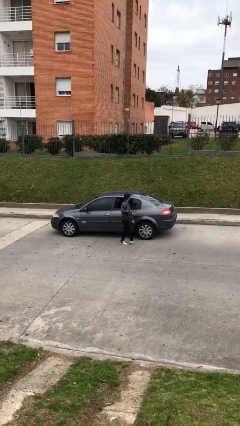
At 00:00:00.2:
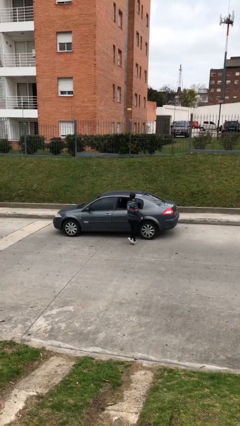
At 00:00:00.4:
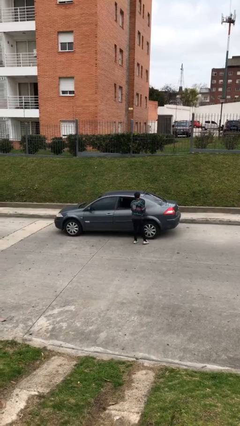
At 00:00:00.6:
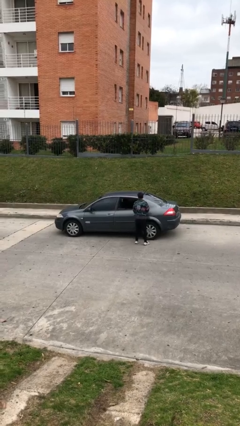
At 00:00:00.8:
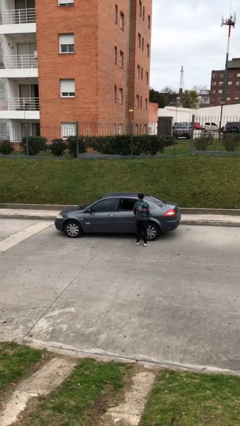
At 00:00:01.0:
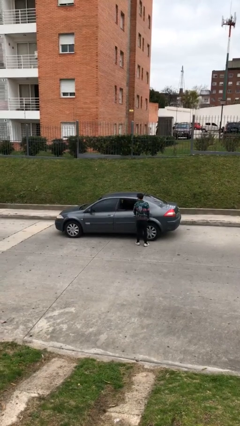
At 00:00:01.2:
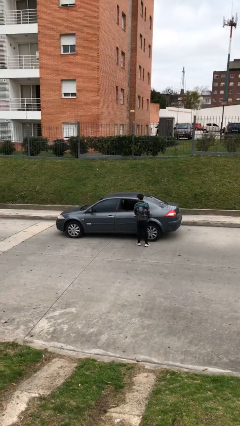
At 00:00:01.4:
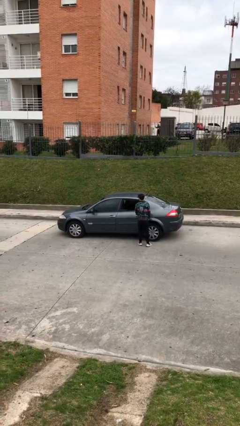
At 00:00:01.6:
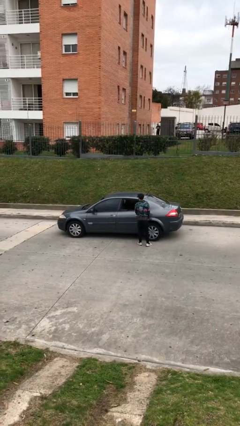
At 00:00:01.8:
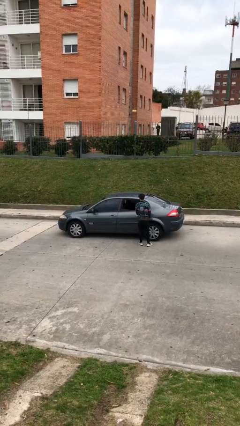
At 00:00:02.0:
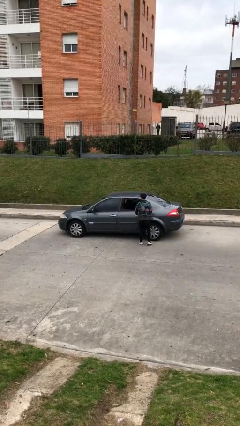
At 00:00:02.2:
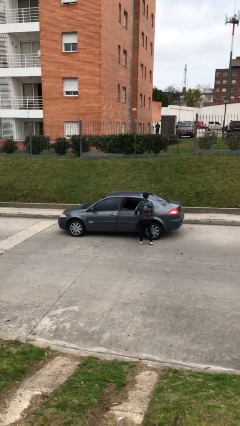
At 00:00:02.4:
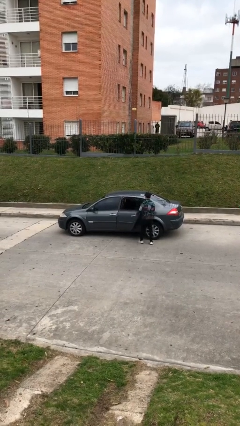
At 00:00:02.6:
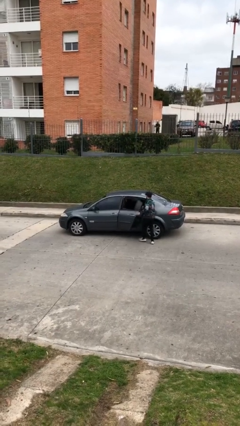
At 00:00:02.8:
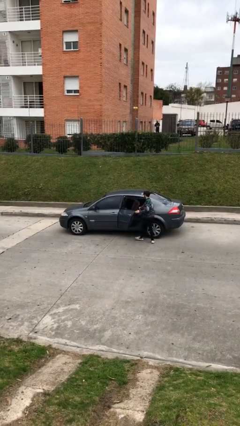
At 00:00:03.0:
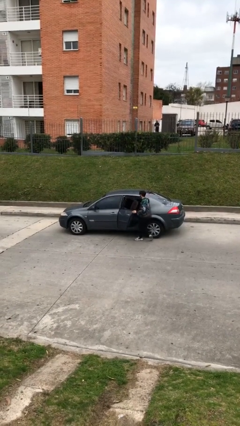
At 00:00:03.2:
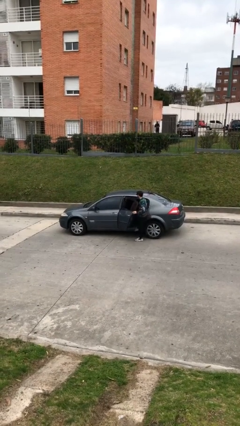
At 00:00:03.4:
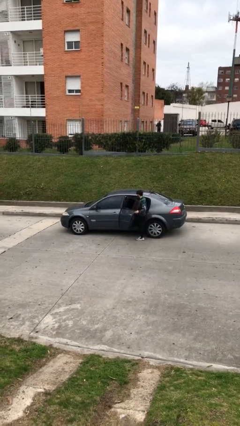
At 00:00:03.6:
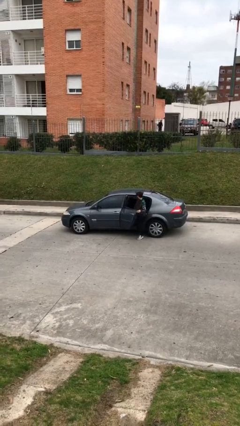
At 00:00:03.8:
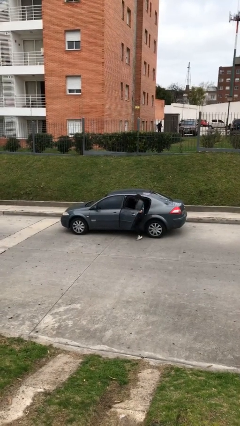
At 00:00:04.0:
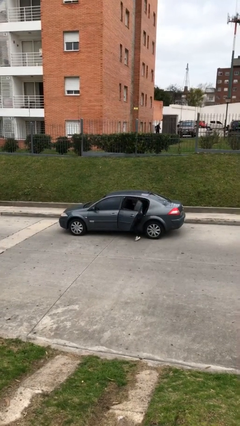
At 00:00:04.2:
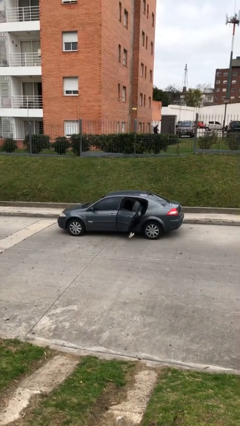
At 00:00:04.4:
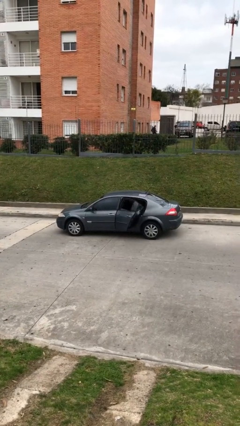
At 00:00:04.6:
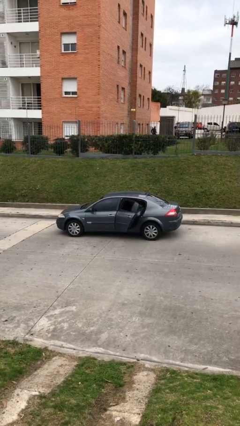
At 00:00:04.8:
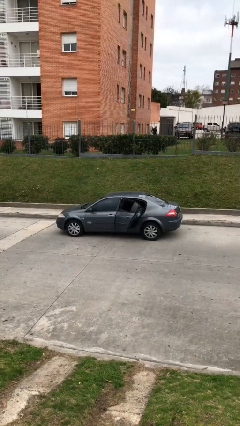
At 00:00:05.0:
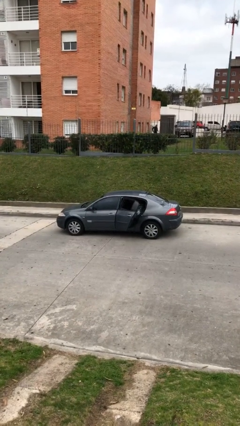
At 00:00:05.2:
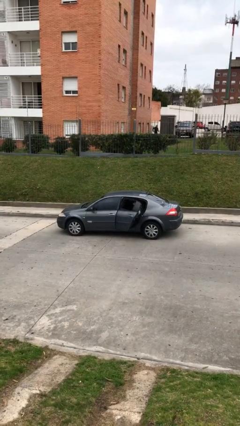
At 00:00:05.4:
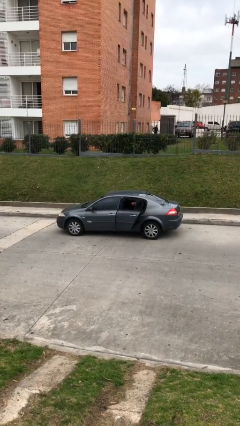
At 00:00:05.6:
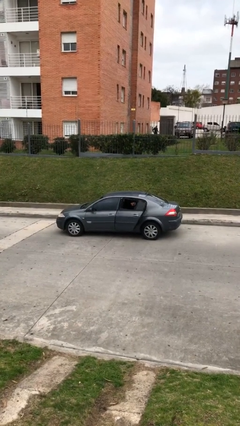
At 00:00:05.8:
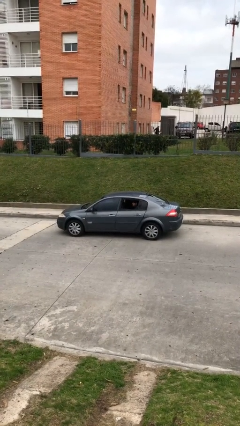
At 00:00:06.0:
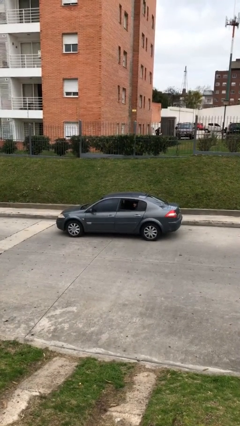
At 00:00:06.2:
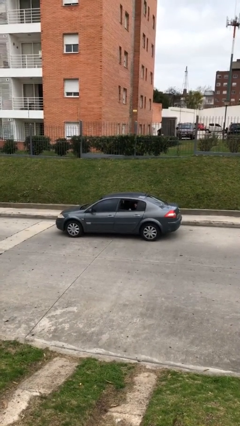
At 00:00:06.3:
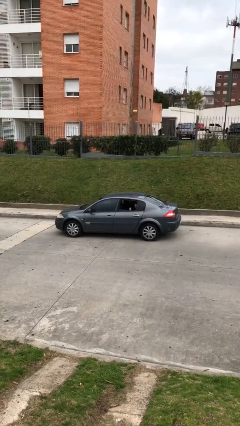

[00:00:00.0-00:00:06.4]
car picks up person

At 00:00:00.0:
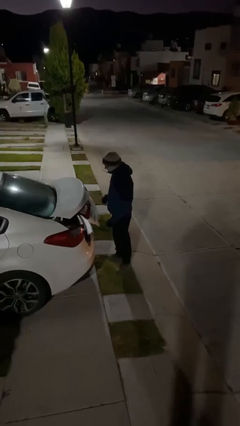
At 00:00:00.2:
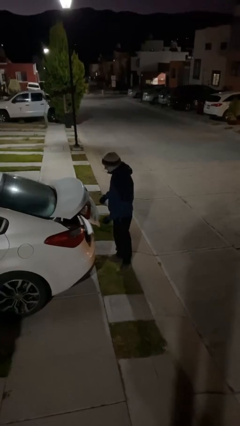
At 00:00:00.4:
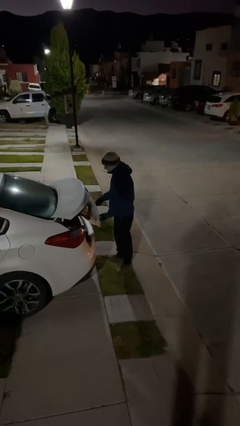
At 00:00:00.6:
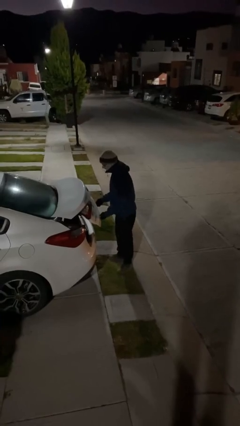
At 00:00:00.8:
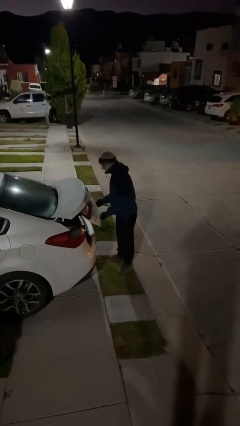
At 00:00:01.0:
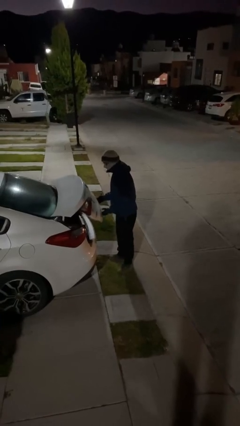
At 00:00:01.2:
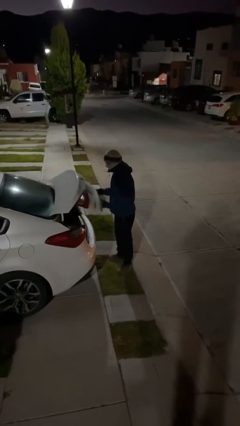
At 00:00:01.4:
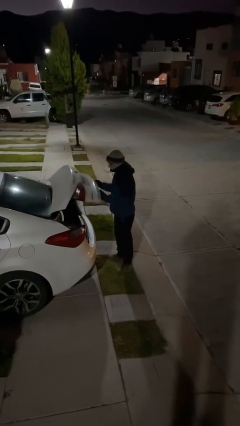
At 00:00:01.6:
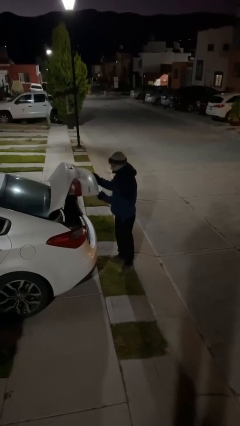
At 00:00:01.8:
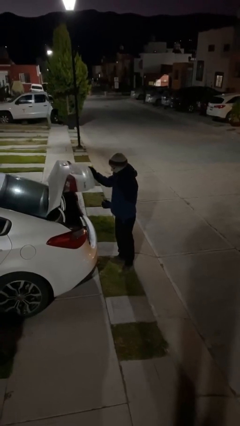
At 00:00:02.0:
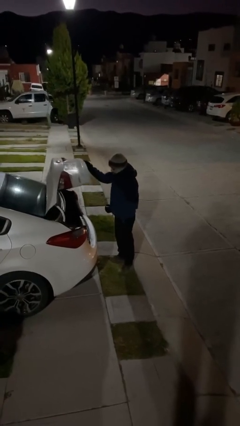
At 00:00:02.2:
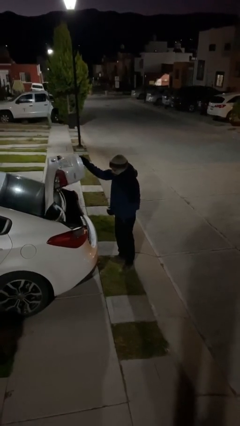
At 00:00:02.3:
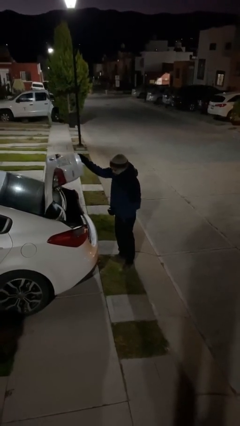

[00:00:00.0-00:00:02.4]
person opens car trunk

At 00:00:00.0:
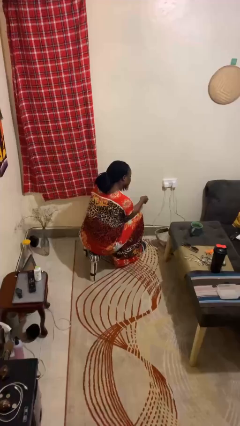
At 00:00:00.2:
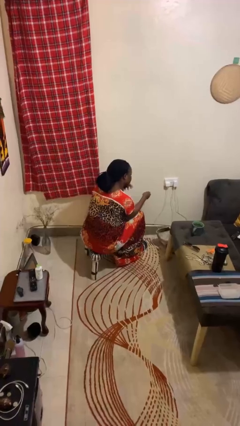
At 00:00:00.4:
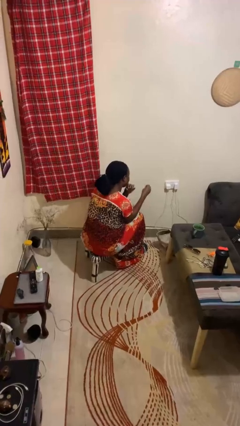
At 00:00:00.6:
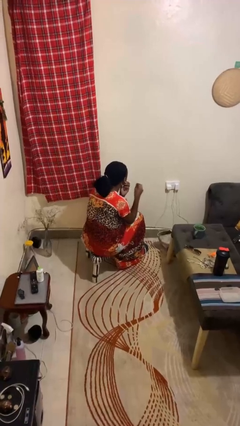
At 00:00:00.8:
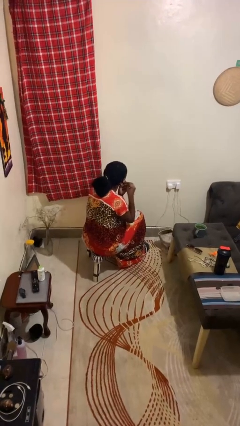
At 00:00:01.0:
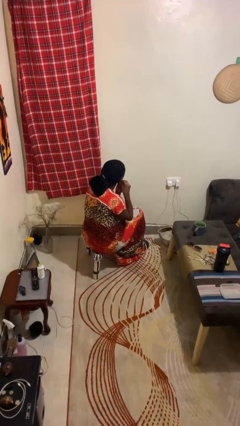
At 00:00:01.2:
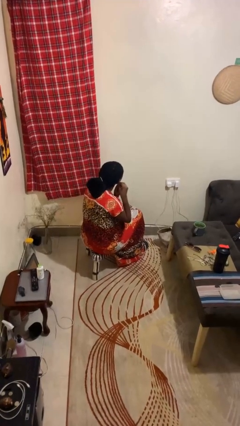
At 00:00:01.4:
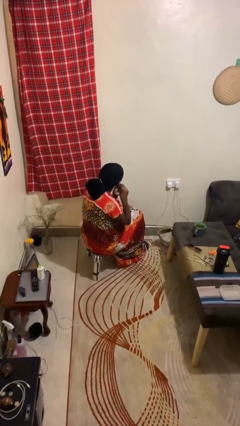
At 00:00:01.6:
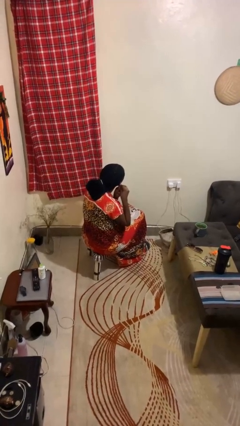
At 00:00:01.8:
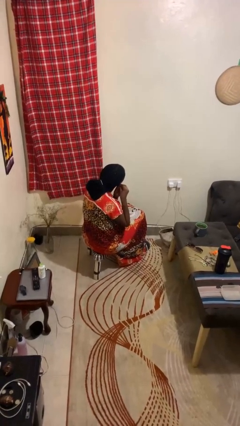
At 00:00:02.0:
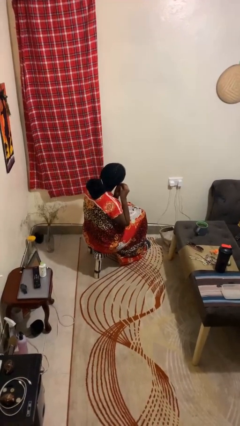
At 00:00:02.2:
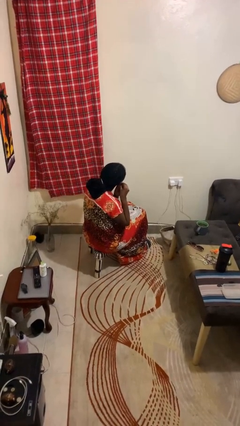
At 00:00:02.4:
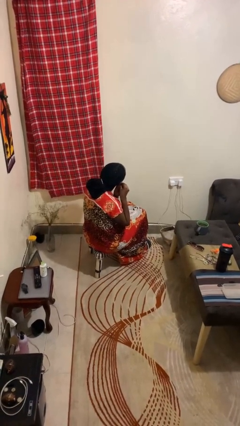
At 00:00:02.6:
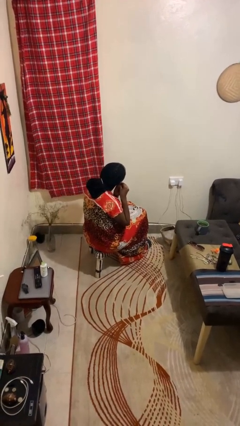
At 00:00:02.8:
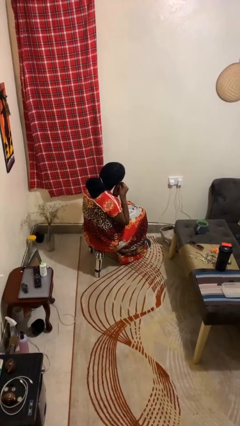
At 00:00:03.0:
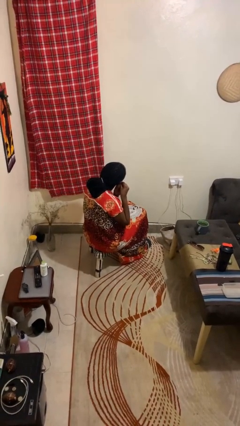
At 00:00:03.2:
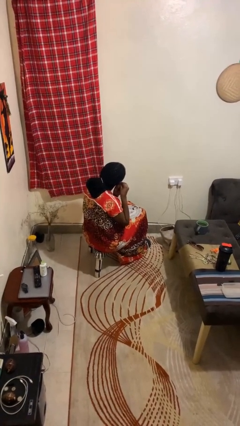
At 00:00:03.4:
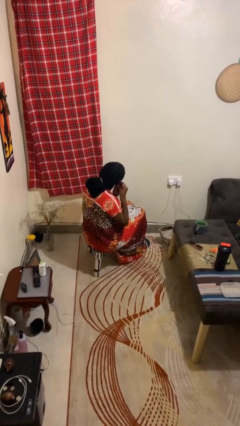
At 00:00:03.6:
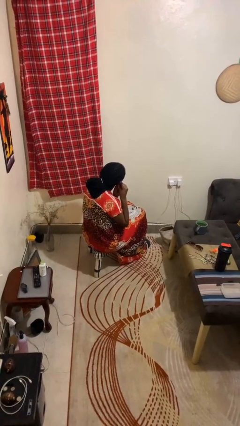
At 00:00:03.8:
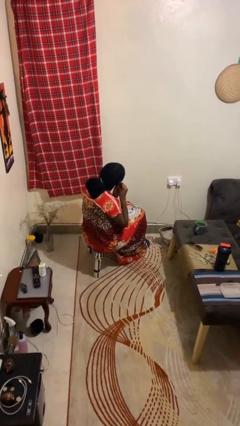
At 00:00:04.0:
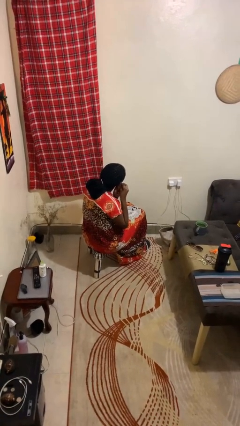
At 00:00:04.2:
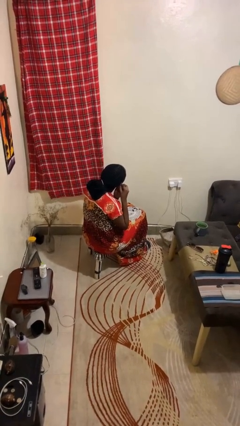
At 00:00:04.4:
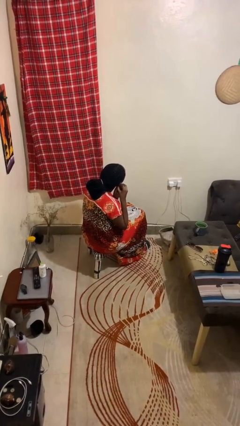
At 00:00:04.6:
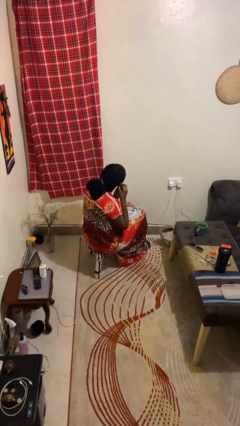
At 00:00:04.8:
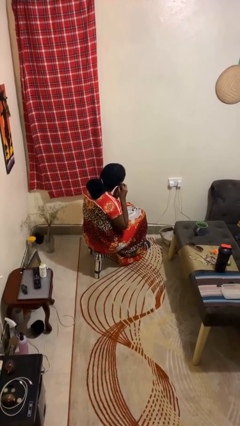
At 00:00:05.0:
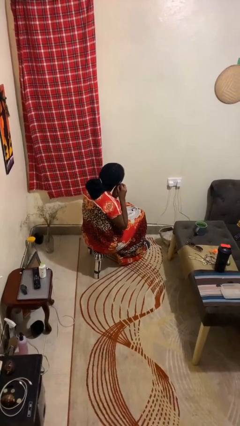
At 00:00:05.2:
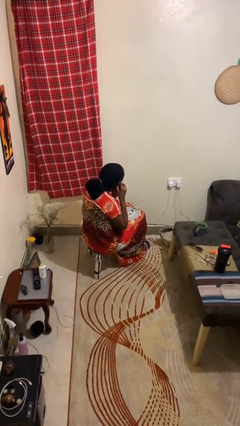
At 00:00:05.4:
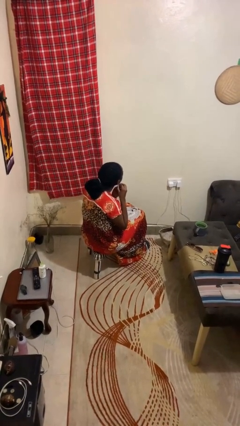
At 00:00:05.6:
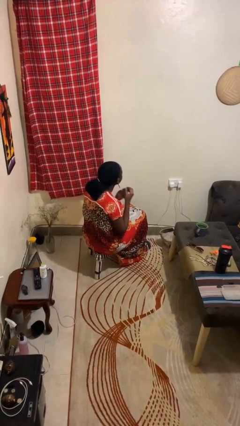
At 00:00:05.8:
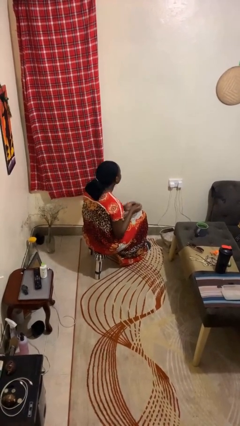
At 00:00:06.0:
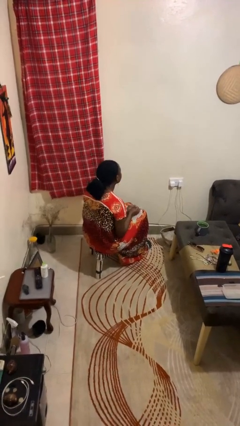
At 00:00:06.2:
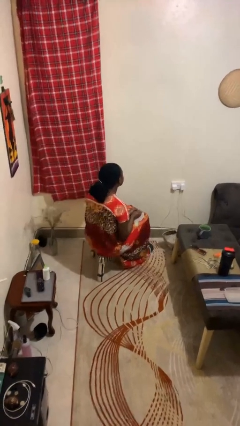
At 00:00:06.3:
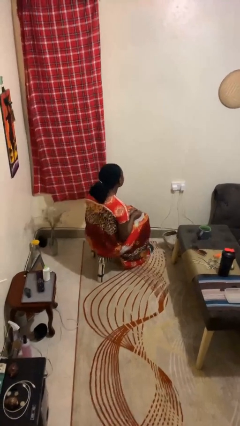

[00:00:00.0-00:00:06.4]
person puts on earrings

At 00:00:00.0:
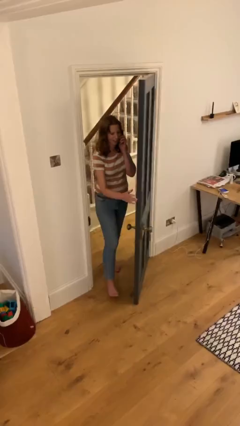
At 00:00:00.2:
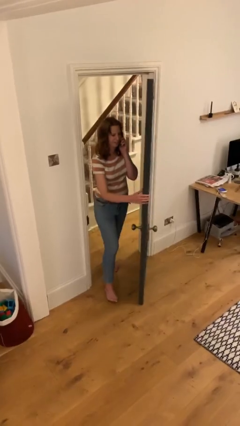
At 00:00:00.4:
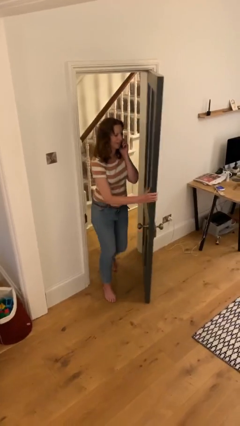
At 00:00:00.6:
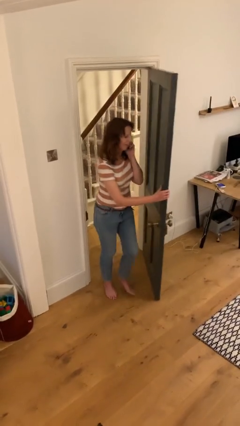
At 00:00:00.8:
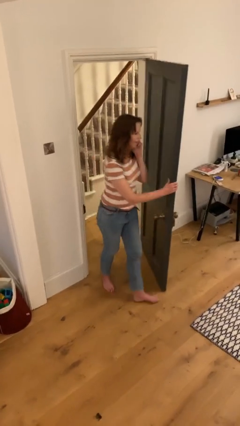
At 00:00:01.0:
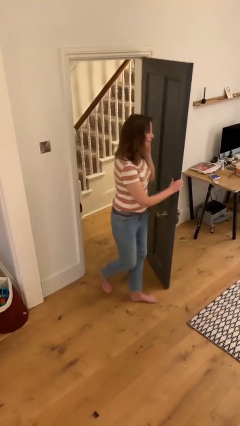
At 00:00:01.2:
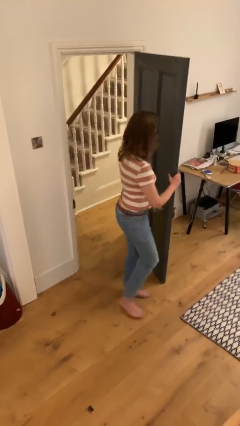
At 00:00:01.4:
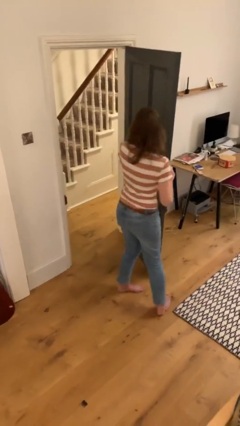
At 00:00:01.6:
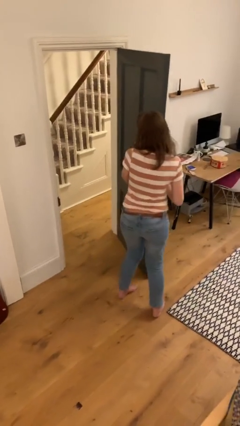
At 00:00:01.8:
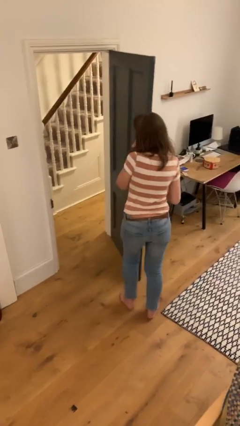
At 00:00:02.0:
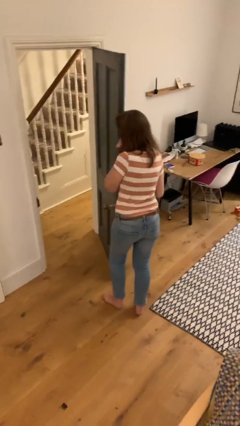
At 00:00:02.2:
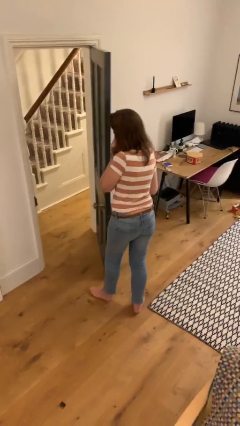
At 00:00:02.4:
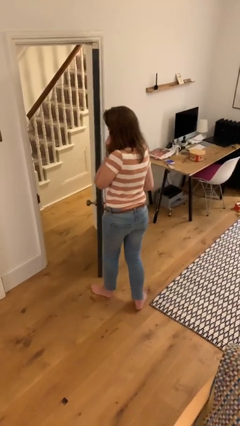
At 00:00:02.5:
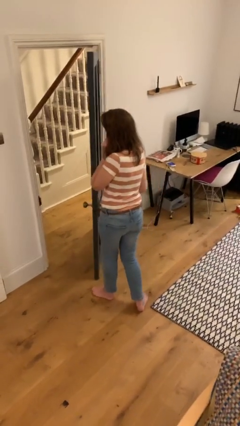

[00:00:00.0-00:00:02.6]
person enters scene through structure
